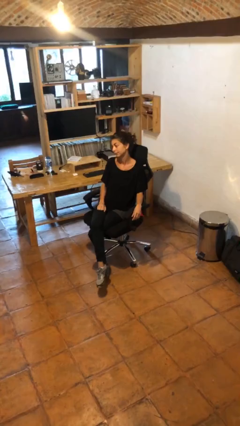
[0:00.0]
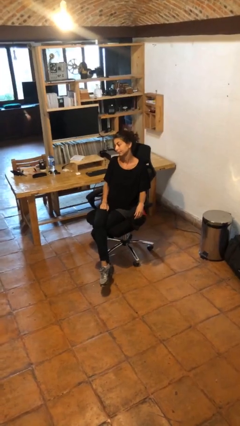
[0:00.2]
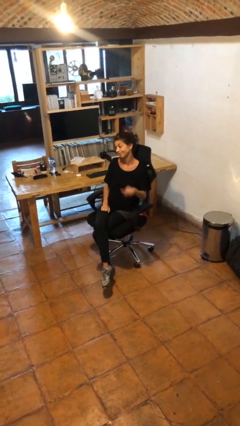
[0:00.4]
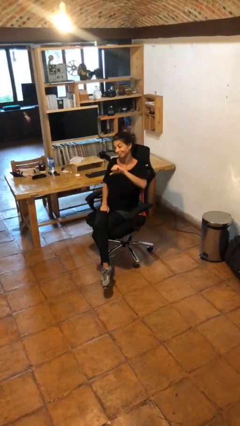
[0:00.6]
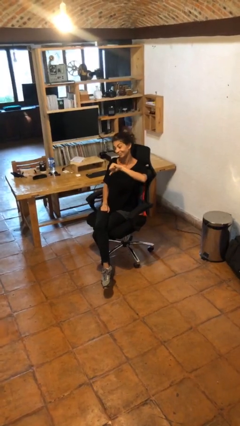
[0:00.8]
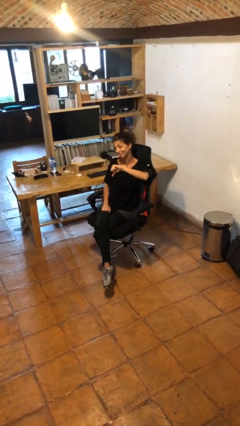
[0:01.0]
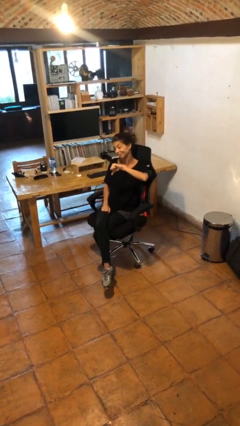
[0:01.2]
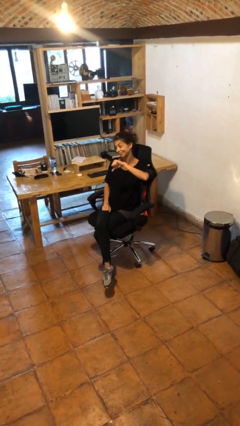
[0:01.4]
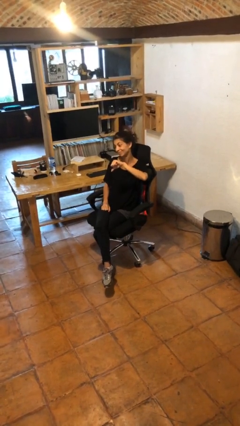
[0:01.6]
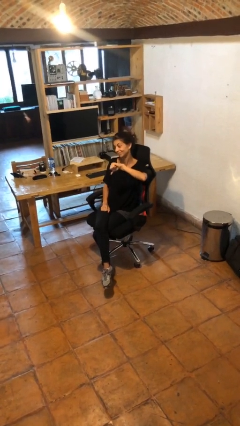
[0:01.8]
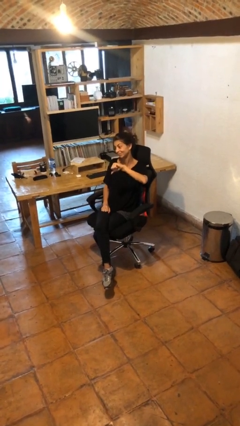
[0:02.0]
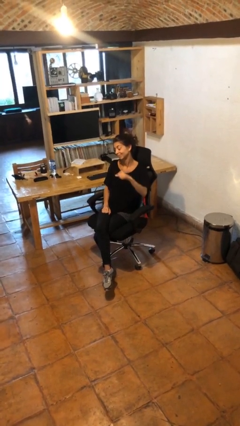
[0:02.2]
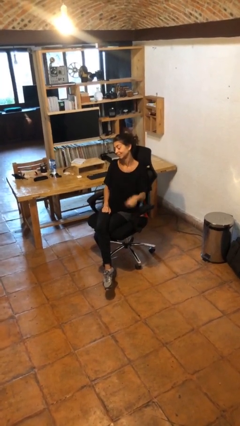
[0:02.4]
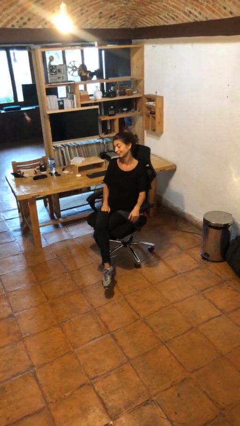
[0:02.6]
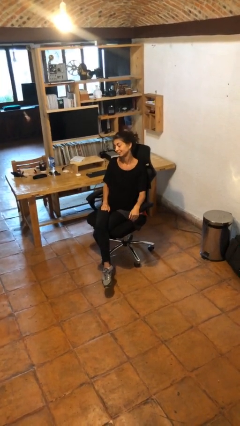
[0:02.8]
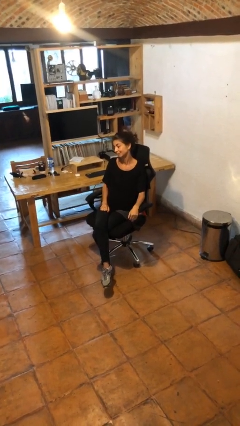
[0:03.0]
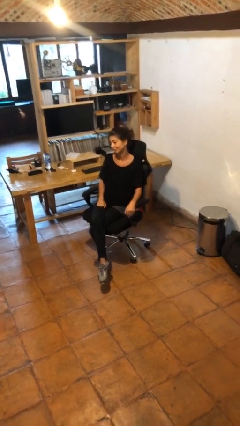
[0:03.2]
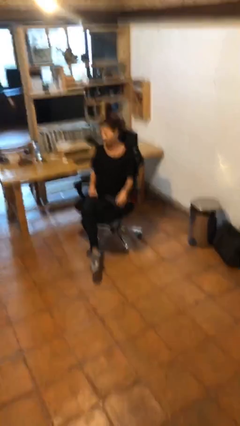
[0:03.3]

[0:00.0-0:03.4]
person gestures thumbs down

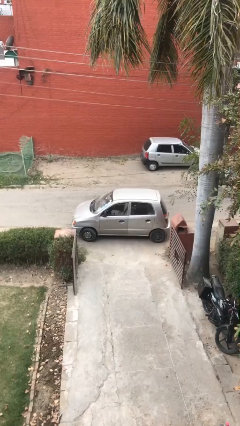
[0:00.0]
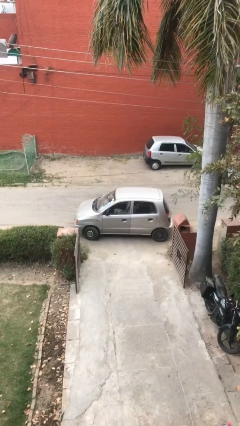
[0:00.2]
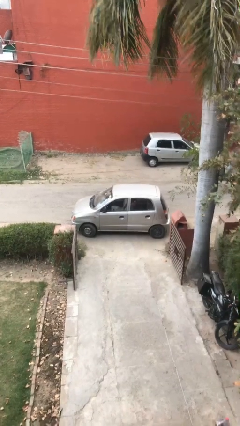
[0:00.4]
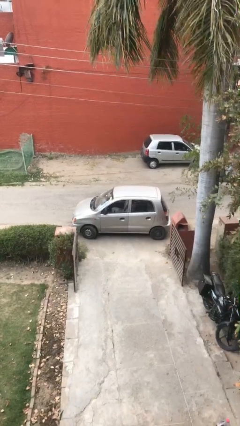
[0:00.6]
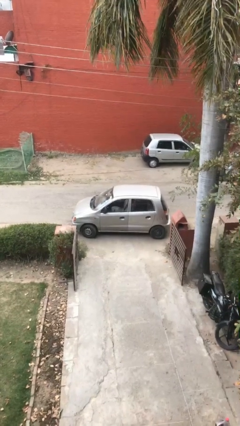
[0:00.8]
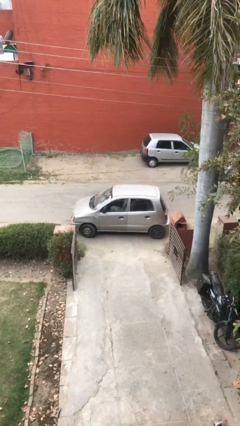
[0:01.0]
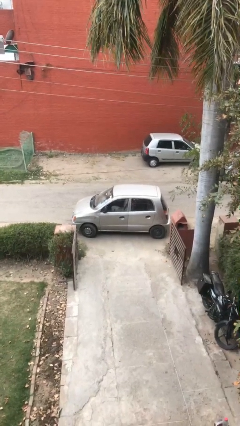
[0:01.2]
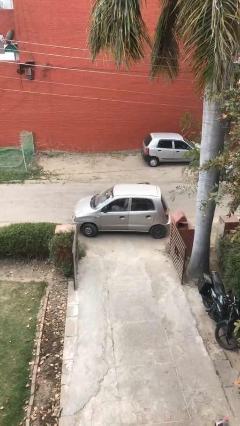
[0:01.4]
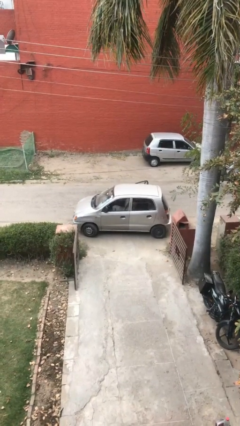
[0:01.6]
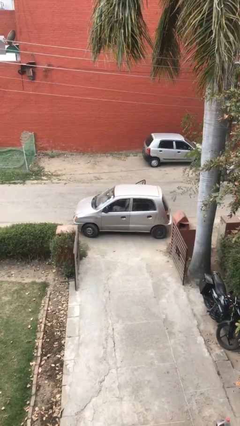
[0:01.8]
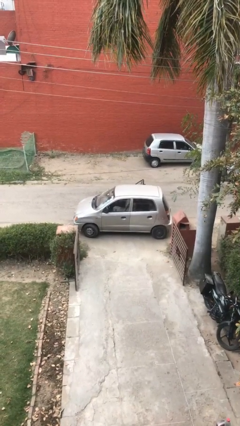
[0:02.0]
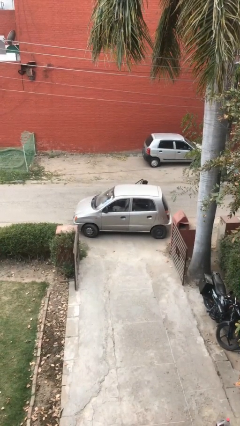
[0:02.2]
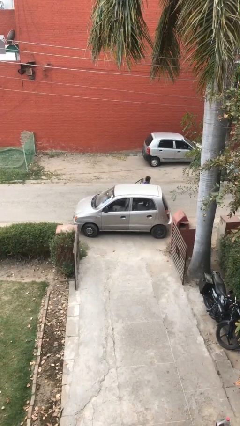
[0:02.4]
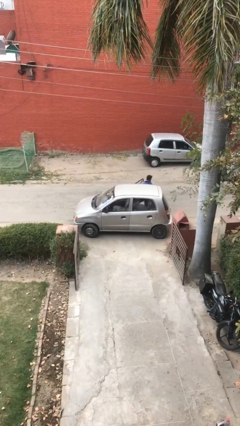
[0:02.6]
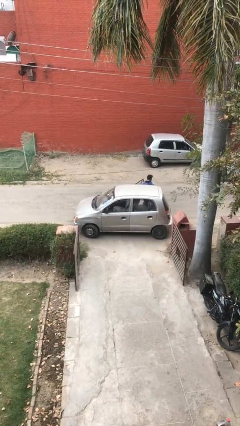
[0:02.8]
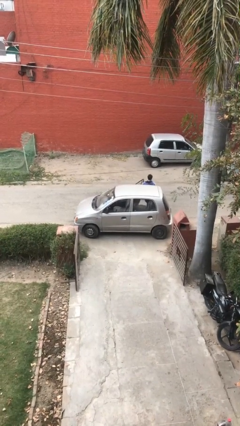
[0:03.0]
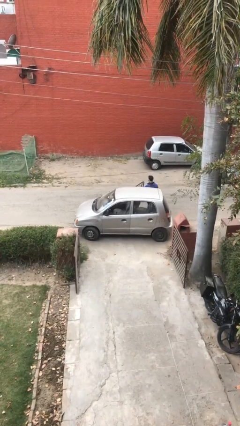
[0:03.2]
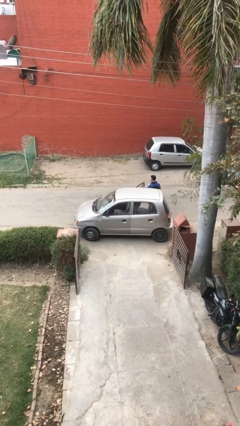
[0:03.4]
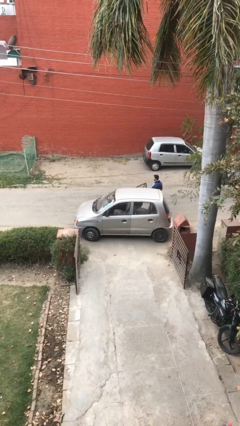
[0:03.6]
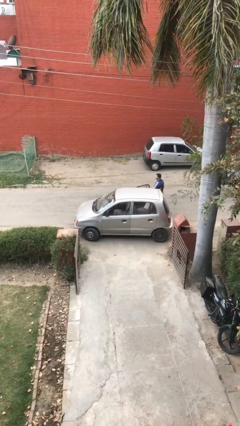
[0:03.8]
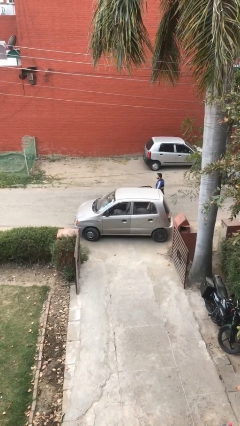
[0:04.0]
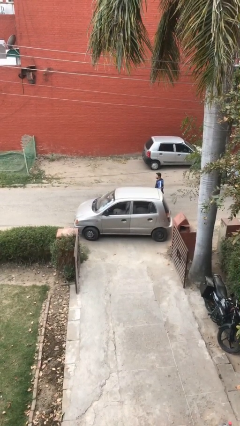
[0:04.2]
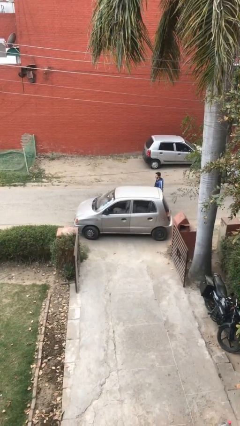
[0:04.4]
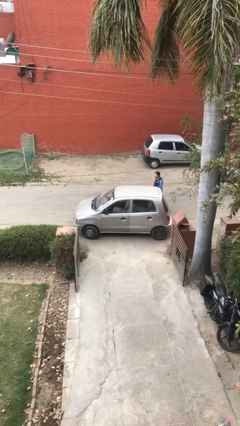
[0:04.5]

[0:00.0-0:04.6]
car drops off person

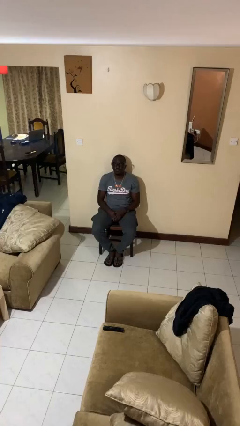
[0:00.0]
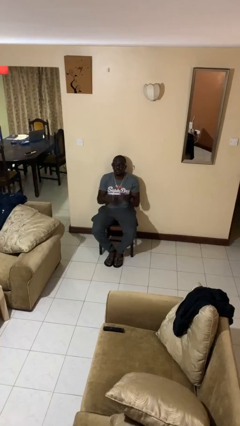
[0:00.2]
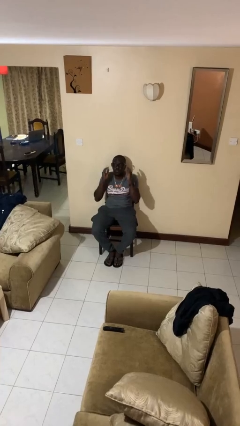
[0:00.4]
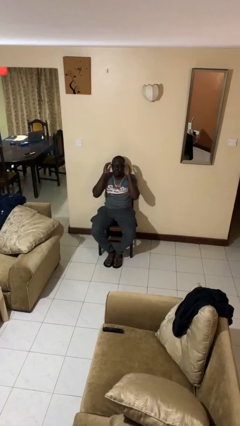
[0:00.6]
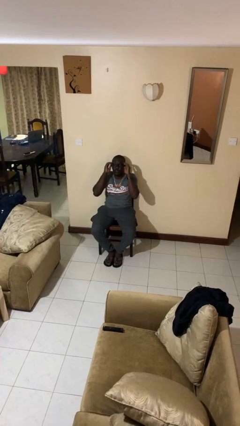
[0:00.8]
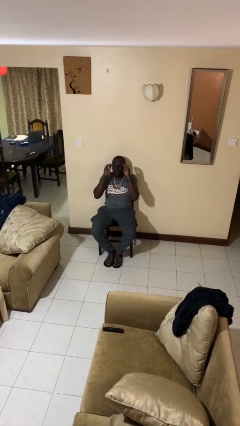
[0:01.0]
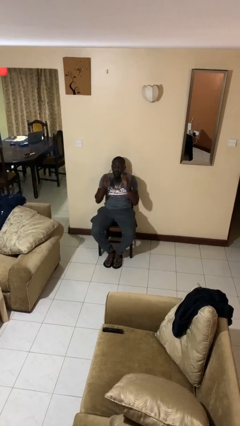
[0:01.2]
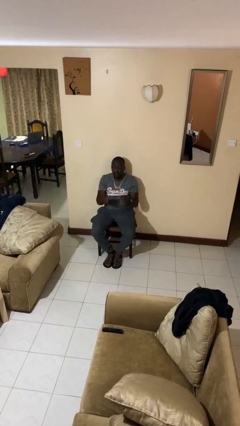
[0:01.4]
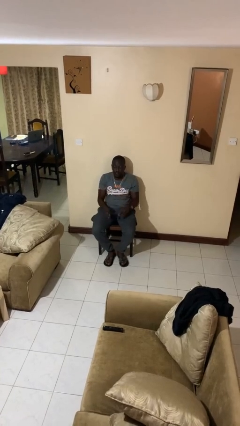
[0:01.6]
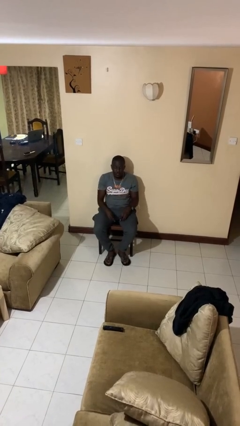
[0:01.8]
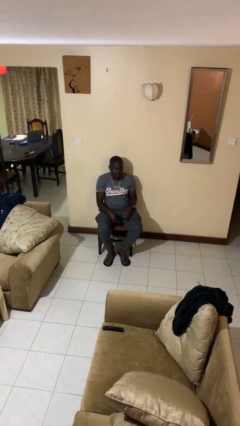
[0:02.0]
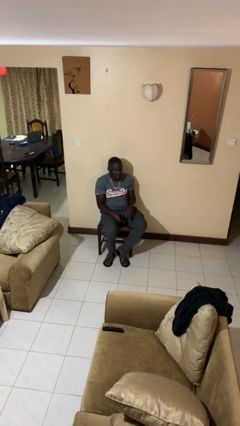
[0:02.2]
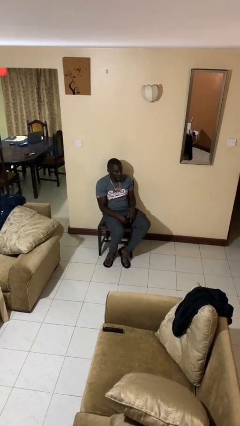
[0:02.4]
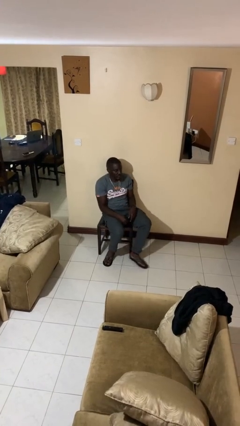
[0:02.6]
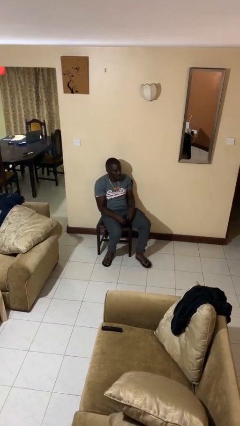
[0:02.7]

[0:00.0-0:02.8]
person takes off glasses

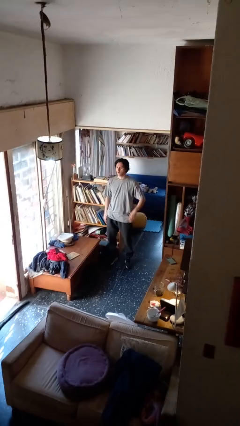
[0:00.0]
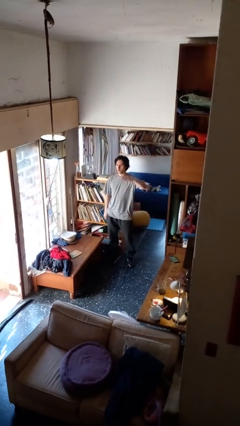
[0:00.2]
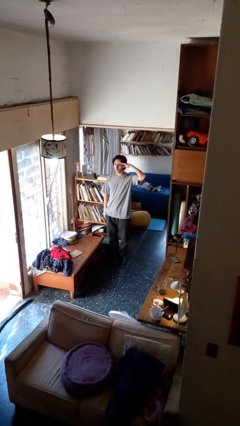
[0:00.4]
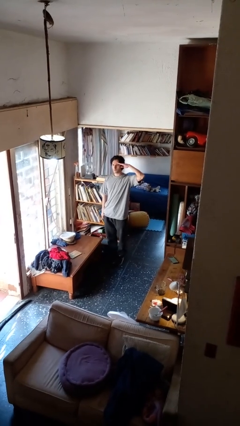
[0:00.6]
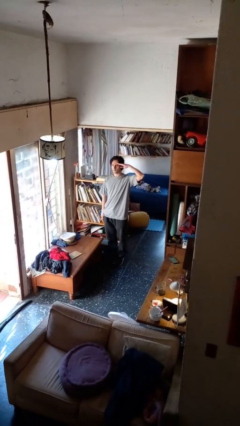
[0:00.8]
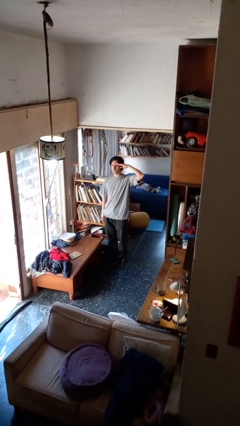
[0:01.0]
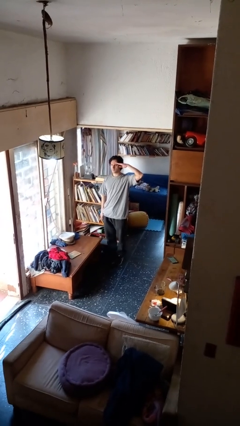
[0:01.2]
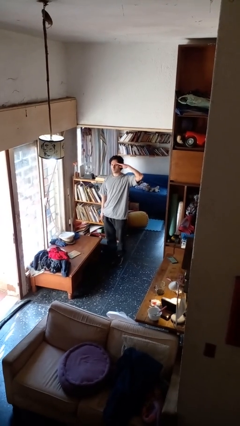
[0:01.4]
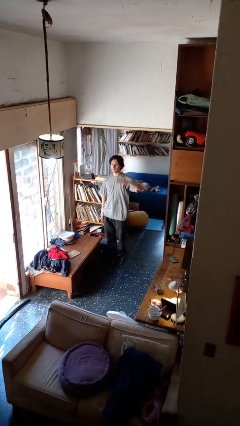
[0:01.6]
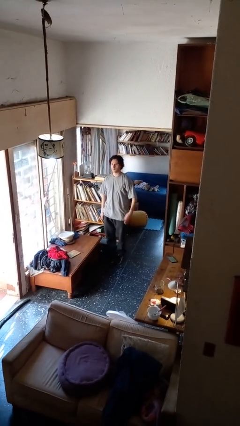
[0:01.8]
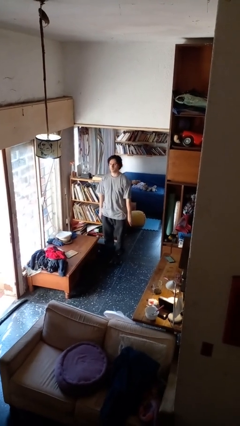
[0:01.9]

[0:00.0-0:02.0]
person salutes

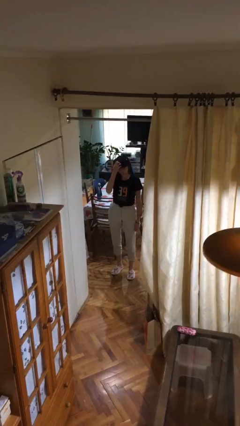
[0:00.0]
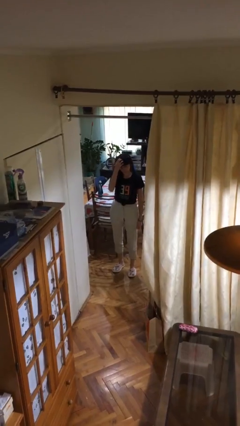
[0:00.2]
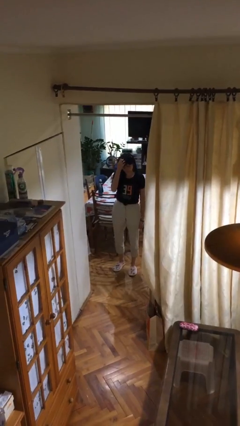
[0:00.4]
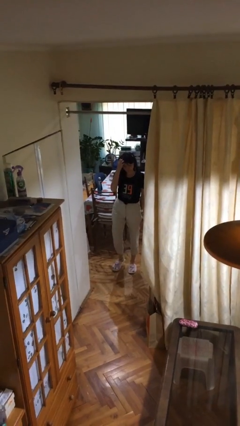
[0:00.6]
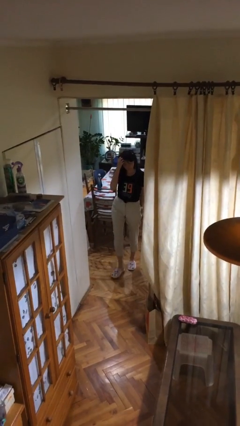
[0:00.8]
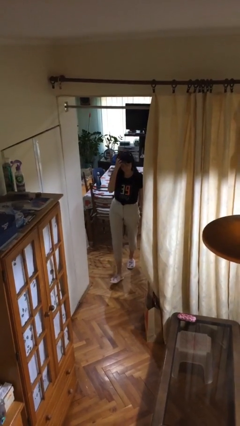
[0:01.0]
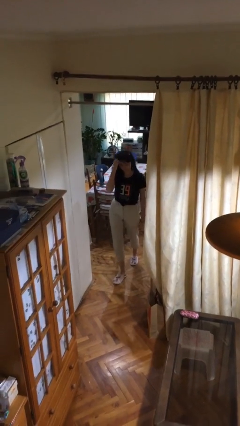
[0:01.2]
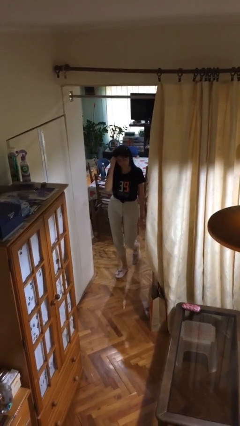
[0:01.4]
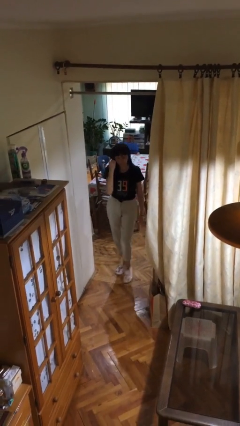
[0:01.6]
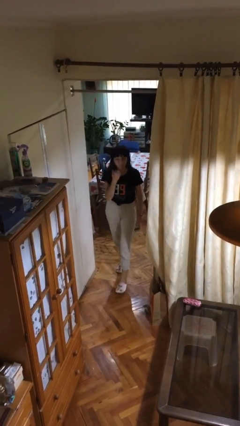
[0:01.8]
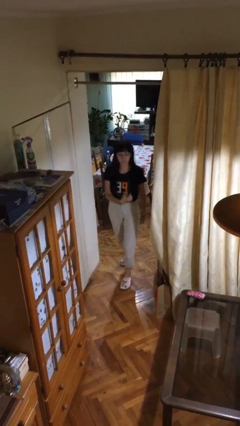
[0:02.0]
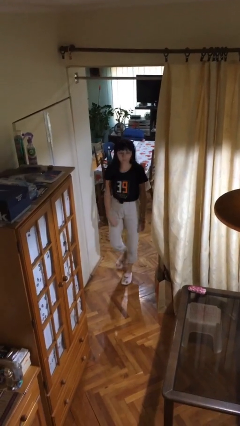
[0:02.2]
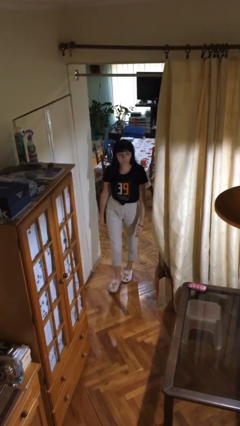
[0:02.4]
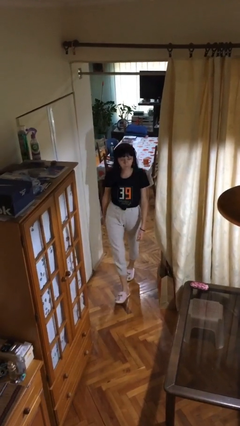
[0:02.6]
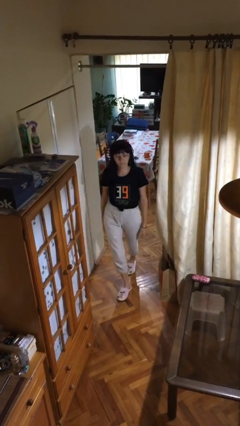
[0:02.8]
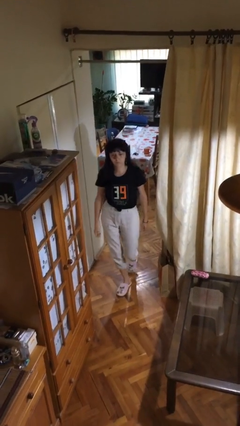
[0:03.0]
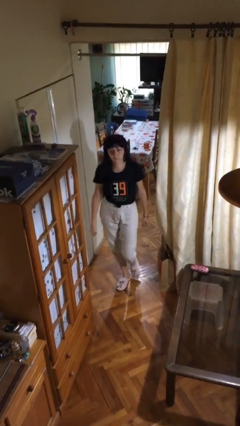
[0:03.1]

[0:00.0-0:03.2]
person enters scene through structure

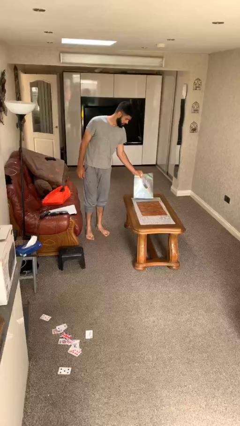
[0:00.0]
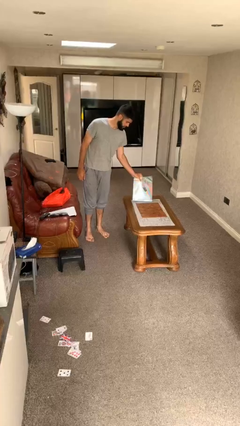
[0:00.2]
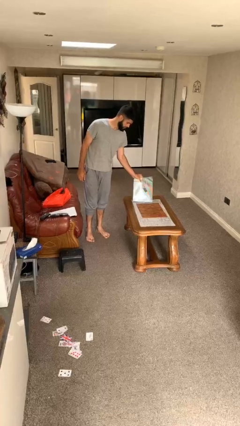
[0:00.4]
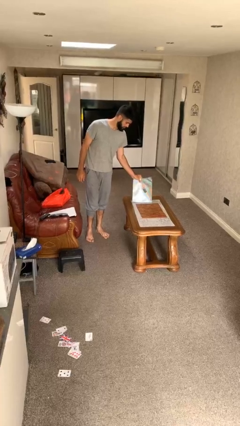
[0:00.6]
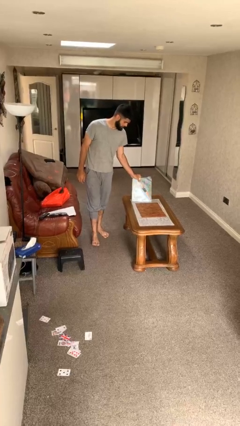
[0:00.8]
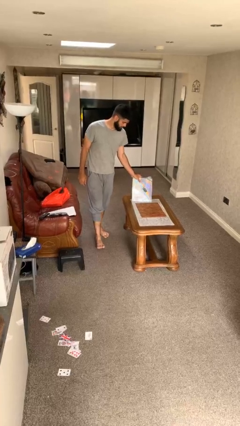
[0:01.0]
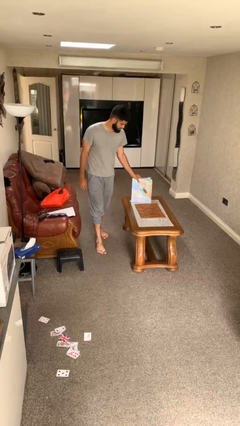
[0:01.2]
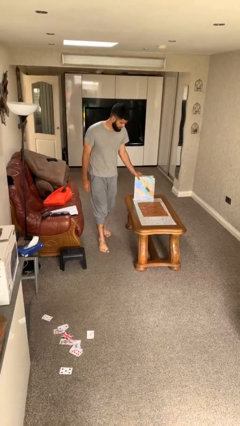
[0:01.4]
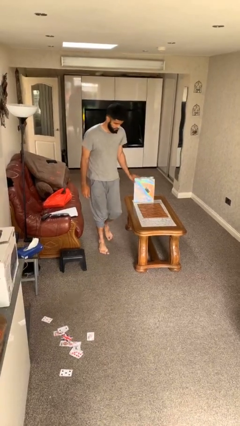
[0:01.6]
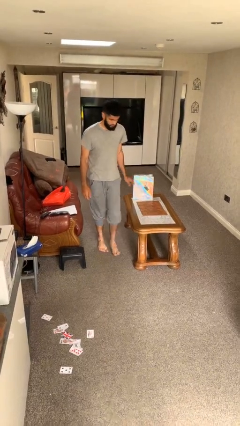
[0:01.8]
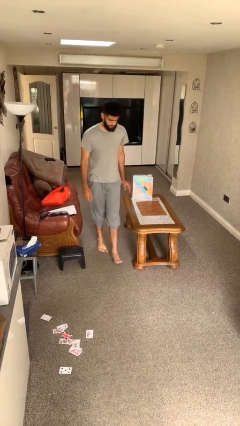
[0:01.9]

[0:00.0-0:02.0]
person puts down object on table
